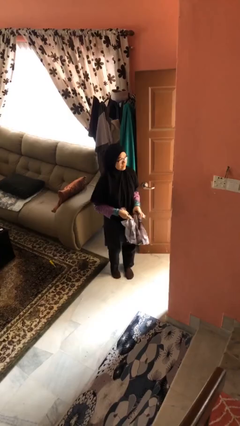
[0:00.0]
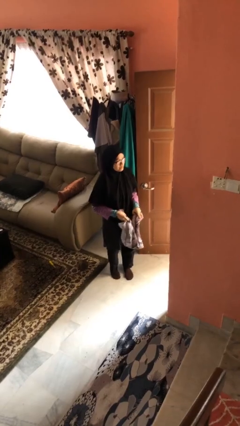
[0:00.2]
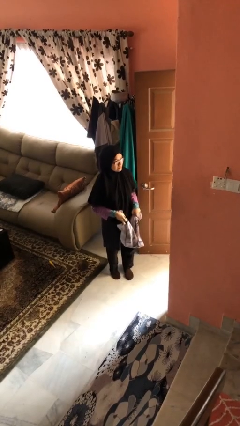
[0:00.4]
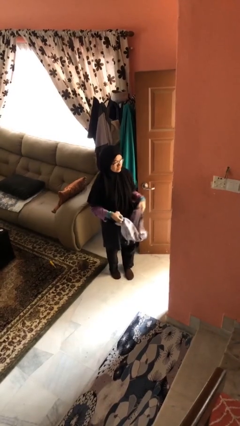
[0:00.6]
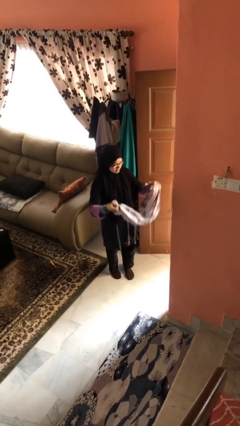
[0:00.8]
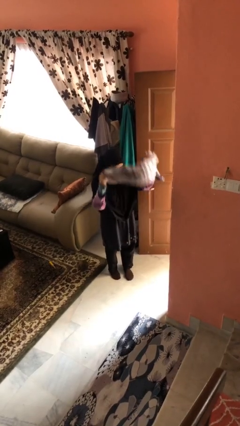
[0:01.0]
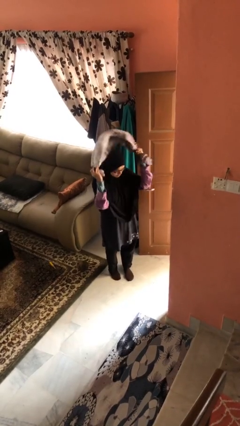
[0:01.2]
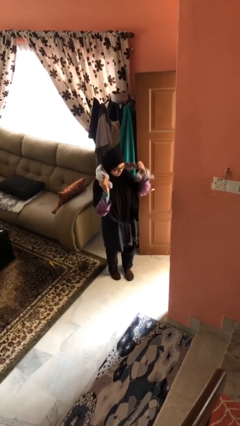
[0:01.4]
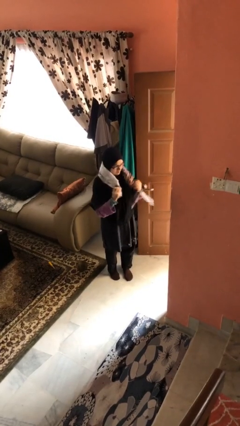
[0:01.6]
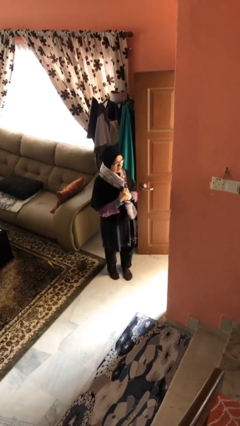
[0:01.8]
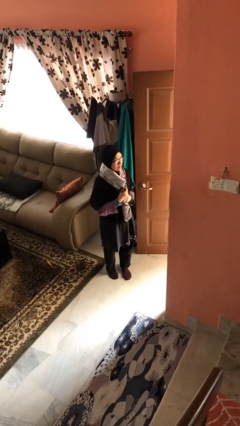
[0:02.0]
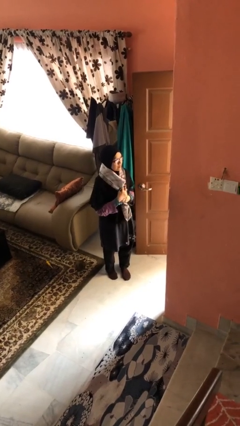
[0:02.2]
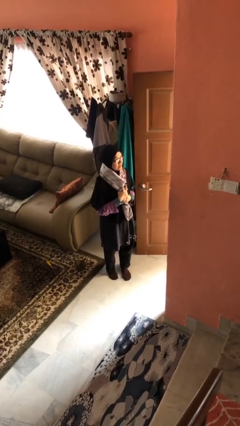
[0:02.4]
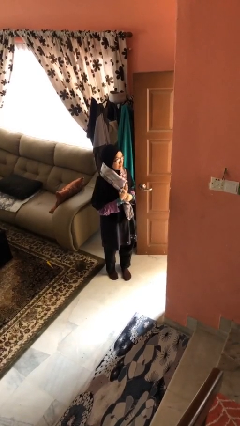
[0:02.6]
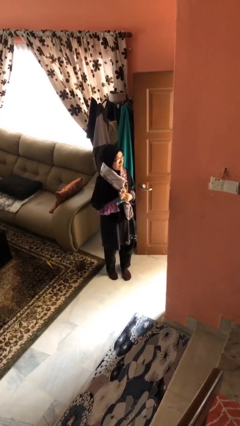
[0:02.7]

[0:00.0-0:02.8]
person puts on scarf

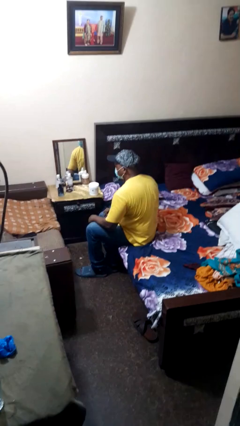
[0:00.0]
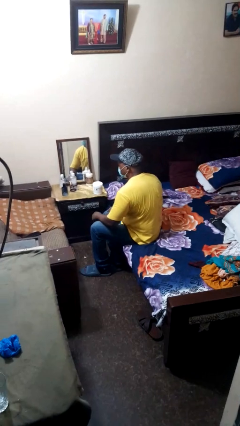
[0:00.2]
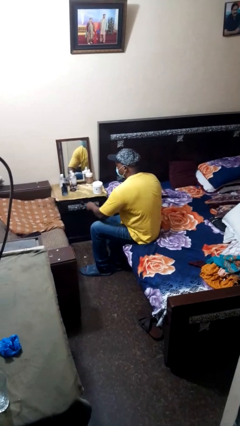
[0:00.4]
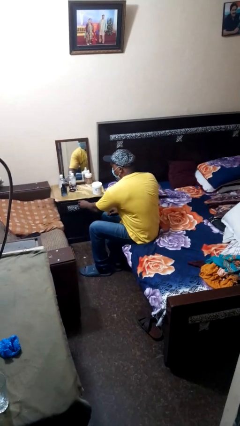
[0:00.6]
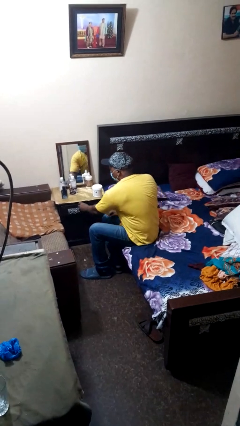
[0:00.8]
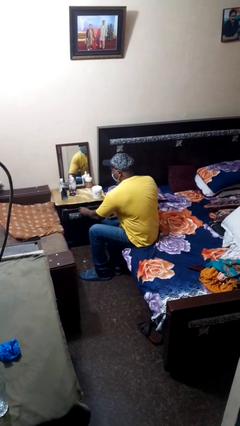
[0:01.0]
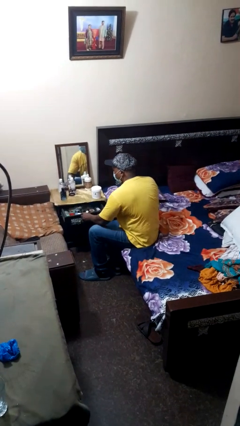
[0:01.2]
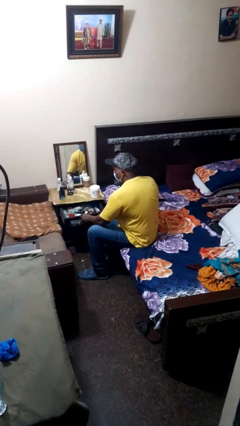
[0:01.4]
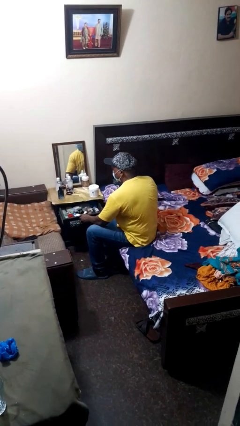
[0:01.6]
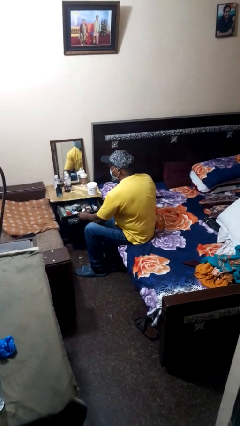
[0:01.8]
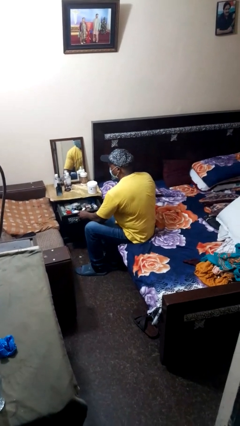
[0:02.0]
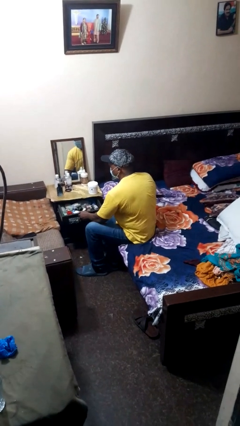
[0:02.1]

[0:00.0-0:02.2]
person opens dresser drawer

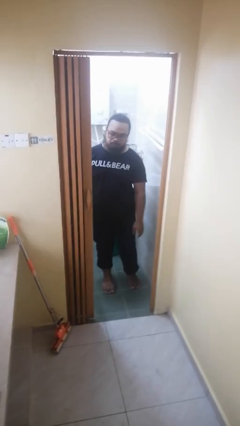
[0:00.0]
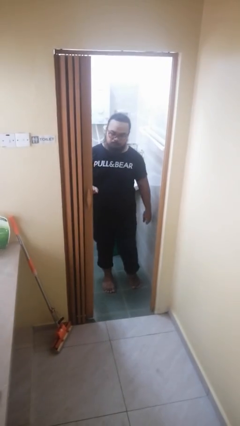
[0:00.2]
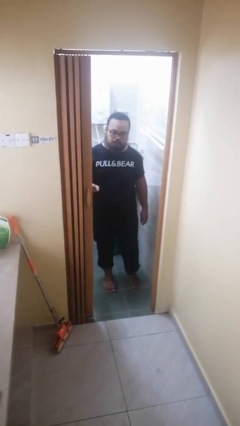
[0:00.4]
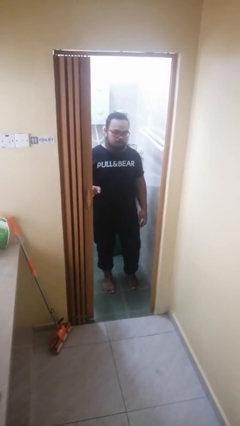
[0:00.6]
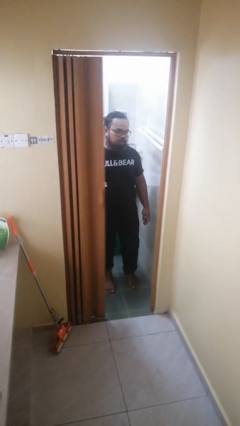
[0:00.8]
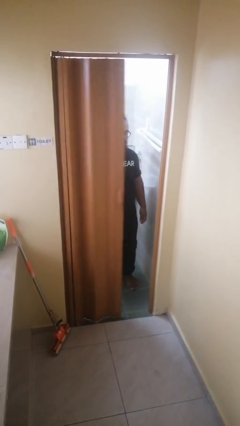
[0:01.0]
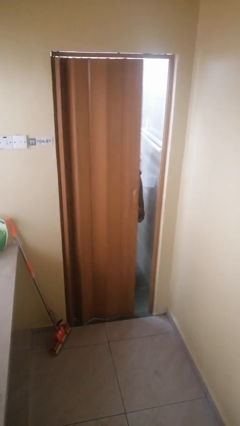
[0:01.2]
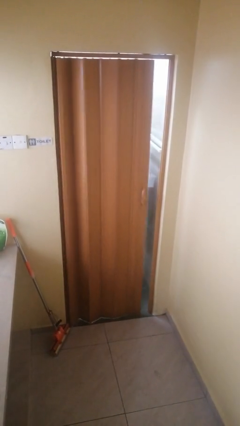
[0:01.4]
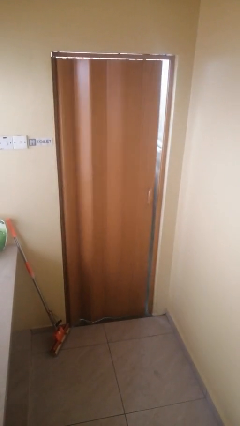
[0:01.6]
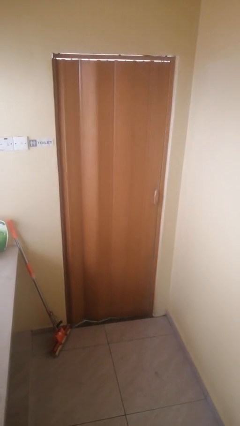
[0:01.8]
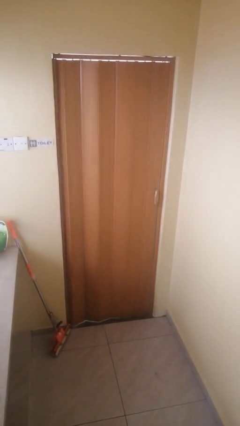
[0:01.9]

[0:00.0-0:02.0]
person closes sliding door

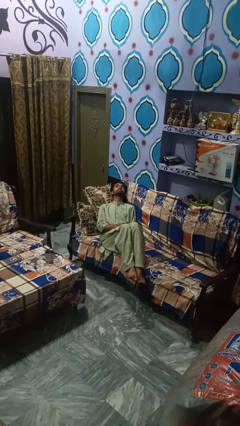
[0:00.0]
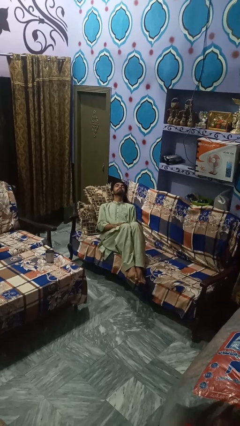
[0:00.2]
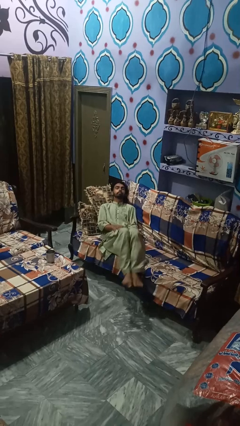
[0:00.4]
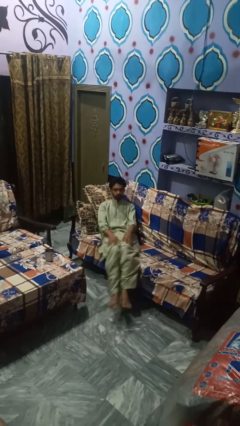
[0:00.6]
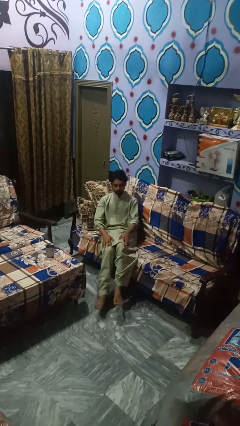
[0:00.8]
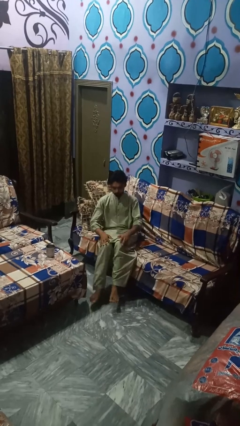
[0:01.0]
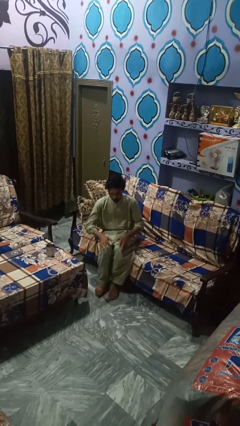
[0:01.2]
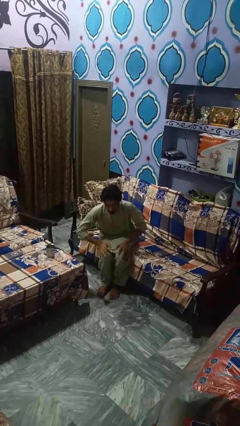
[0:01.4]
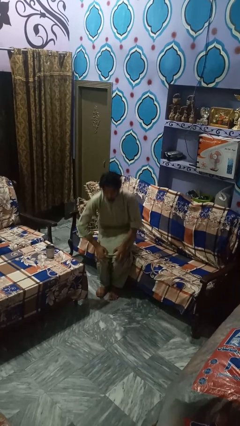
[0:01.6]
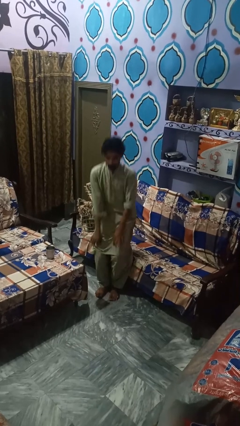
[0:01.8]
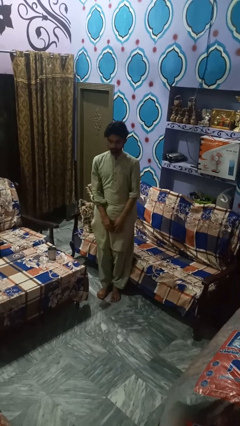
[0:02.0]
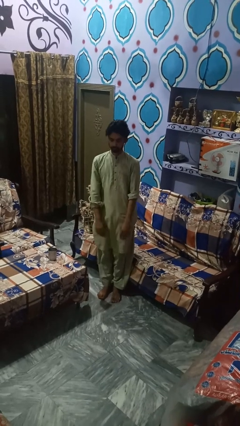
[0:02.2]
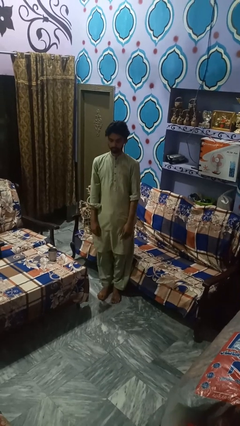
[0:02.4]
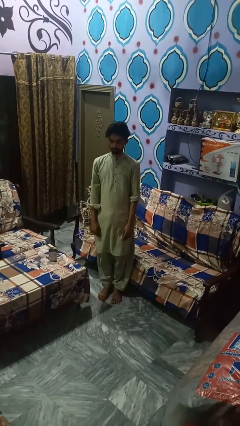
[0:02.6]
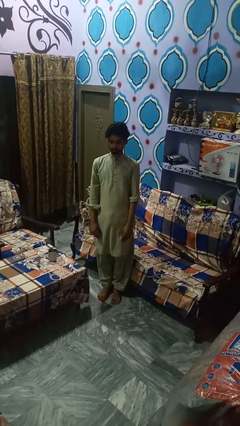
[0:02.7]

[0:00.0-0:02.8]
person stands up

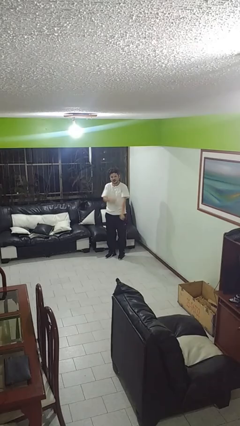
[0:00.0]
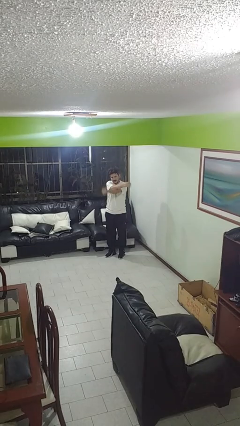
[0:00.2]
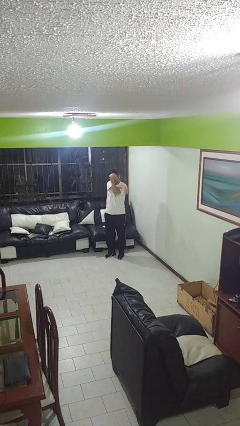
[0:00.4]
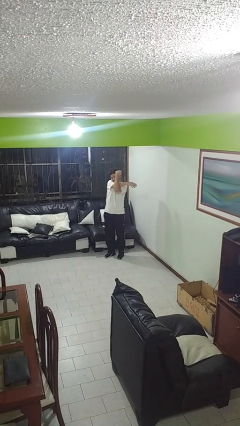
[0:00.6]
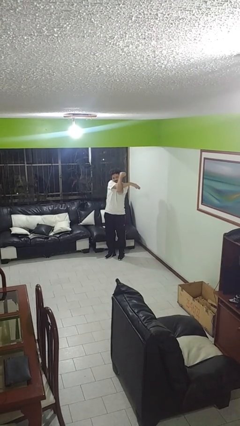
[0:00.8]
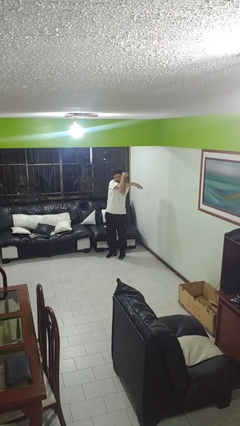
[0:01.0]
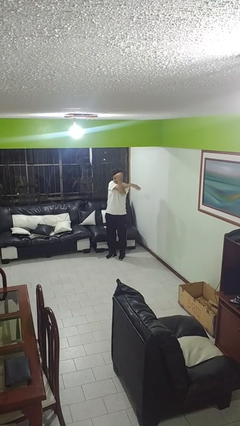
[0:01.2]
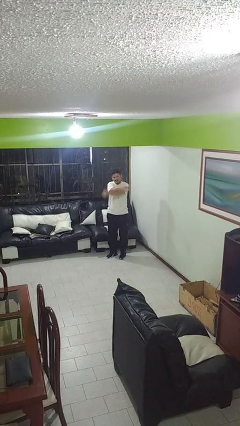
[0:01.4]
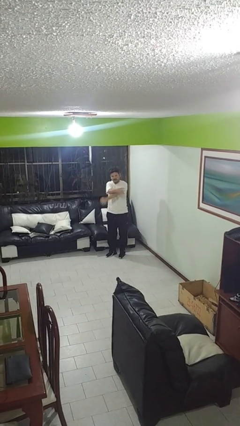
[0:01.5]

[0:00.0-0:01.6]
person stretches arms to side

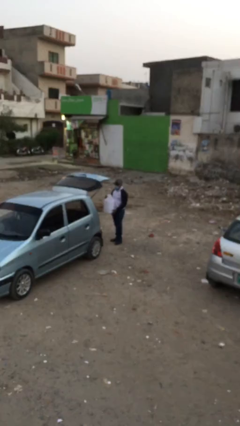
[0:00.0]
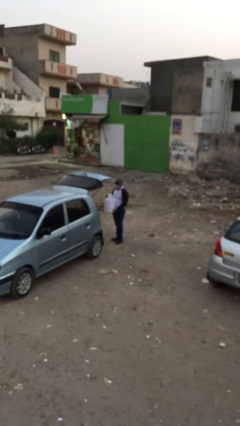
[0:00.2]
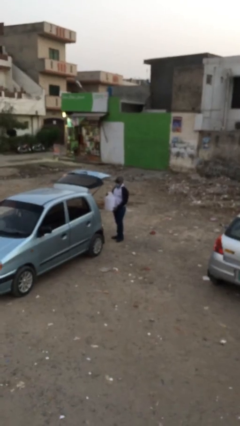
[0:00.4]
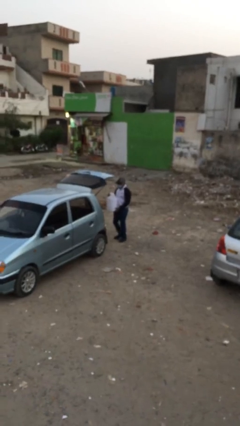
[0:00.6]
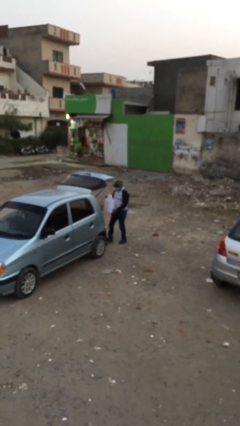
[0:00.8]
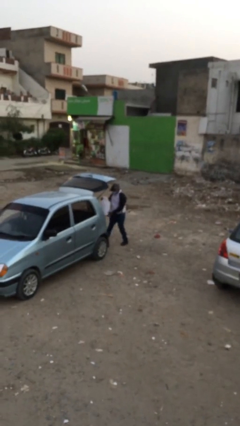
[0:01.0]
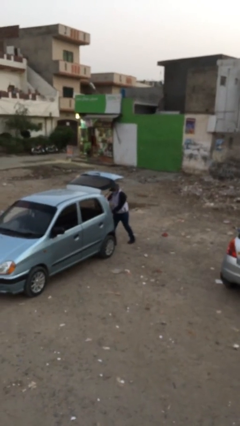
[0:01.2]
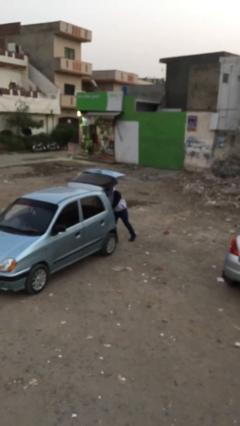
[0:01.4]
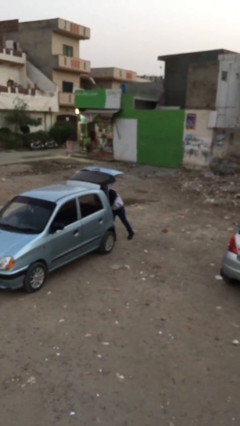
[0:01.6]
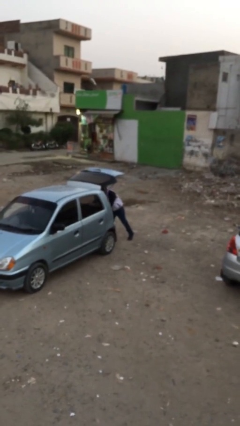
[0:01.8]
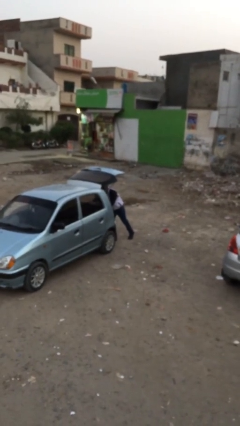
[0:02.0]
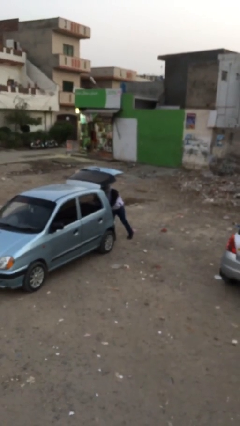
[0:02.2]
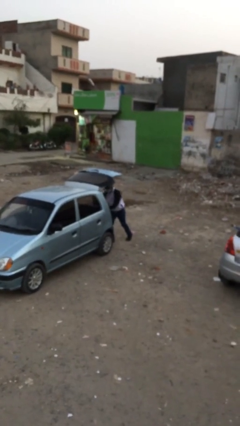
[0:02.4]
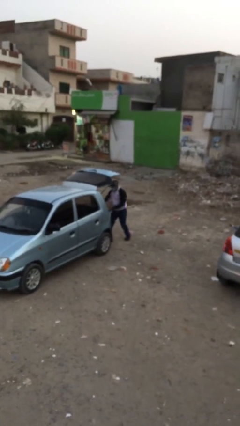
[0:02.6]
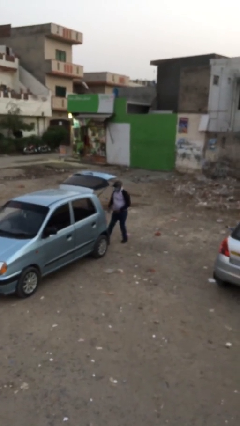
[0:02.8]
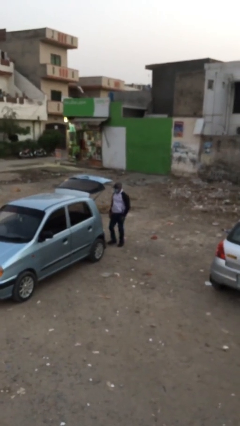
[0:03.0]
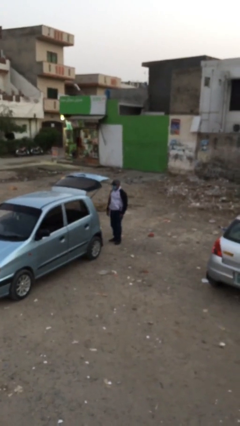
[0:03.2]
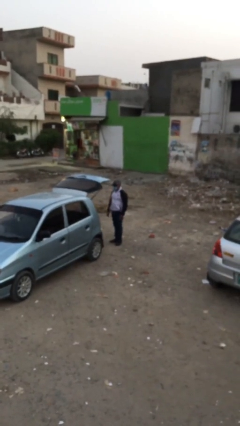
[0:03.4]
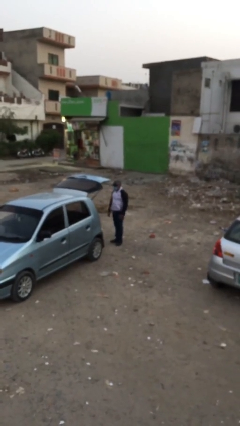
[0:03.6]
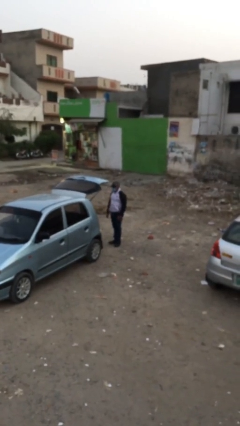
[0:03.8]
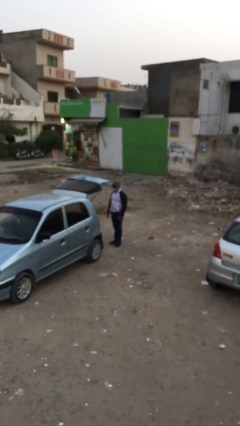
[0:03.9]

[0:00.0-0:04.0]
person loads car

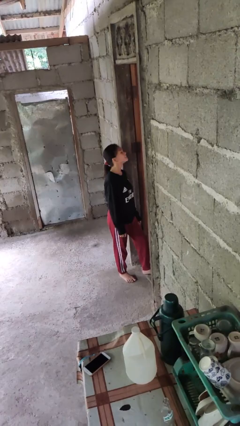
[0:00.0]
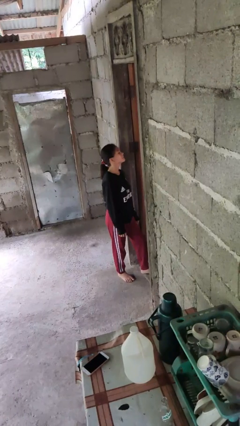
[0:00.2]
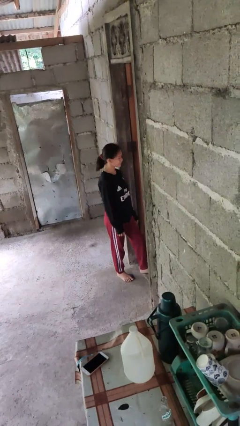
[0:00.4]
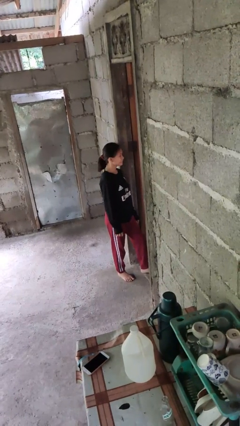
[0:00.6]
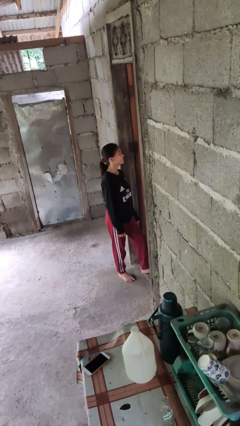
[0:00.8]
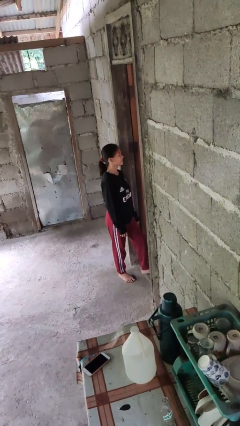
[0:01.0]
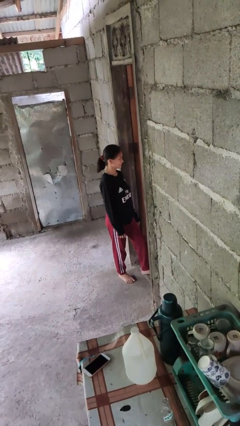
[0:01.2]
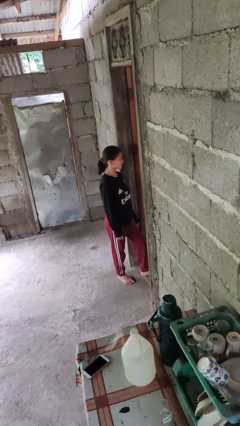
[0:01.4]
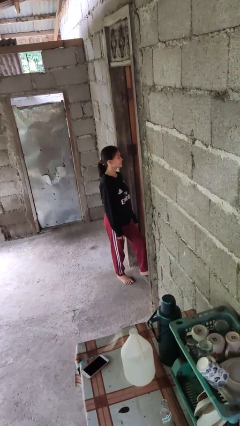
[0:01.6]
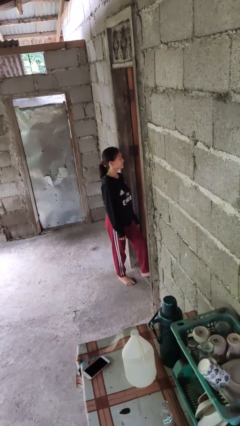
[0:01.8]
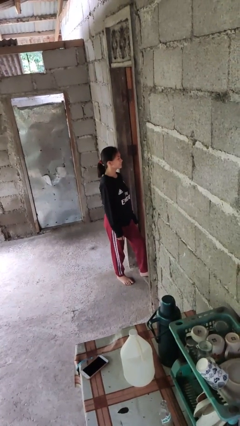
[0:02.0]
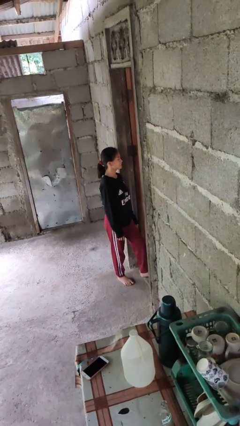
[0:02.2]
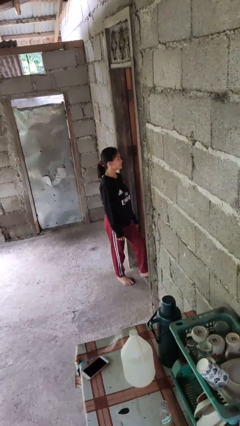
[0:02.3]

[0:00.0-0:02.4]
person nods head
